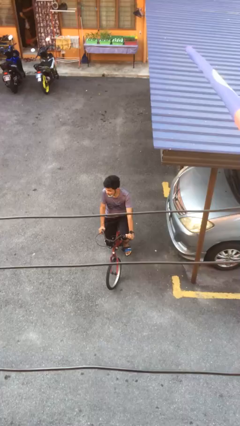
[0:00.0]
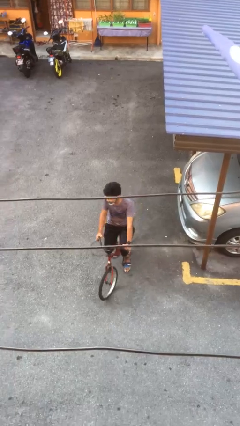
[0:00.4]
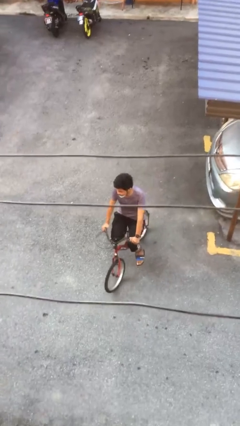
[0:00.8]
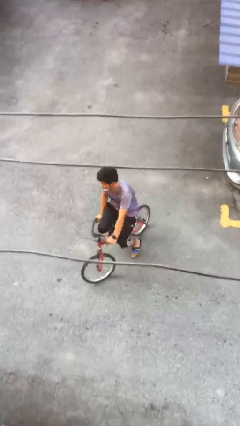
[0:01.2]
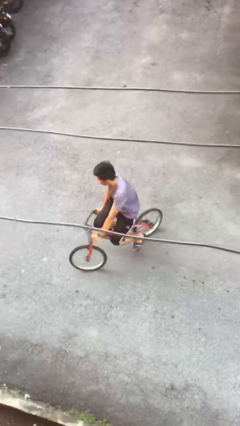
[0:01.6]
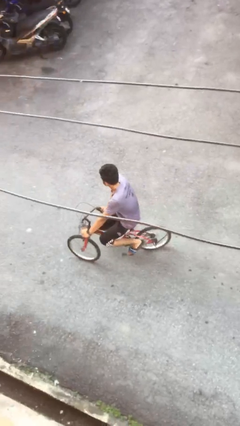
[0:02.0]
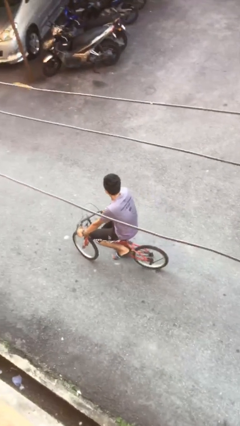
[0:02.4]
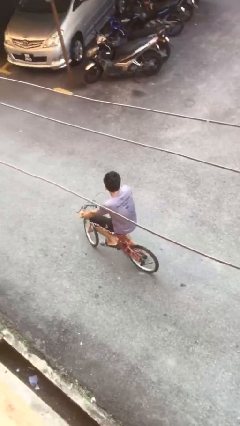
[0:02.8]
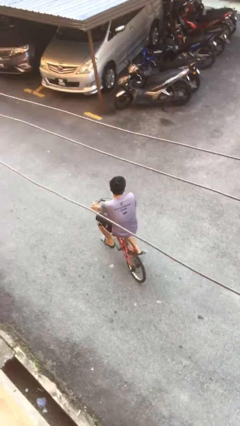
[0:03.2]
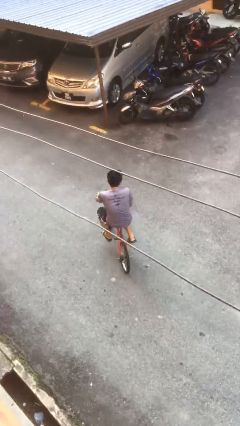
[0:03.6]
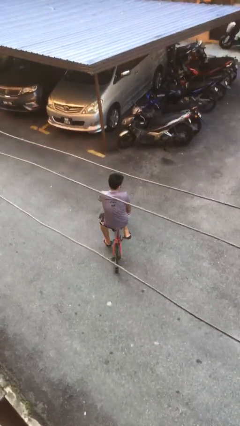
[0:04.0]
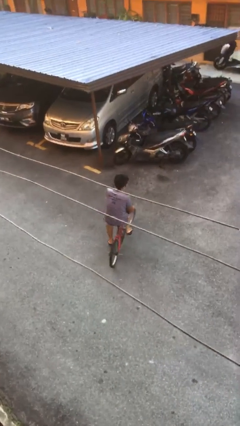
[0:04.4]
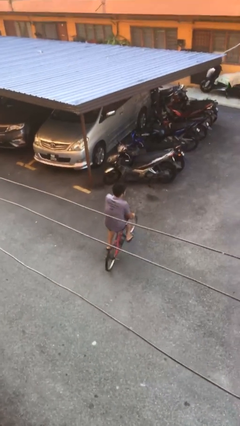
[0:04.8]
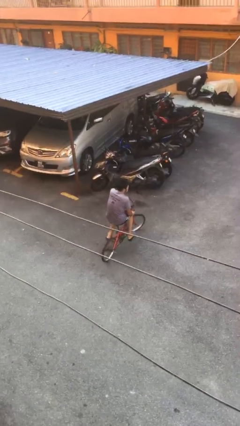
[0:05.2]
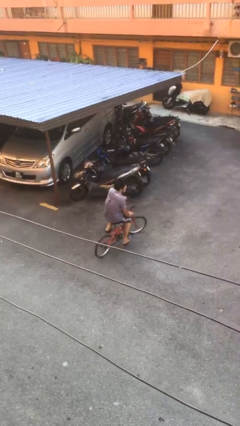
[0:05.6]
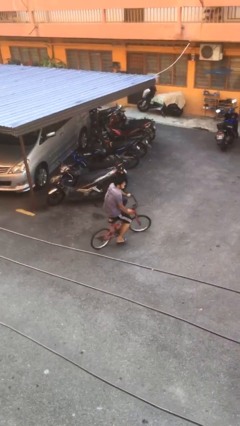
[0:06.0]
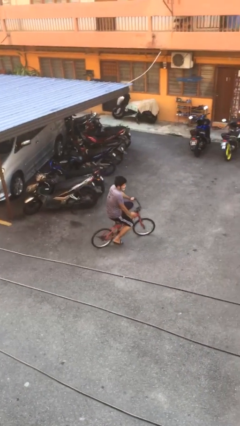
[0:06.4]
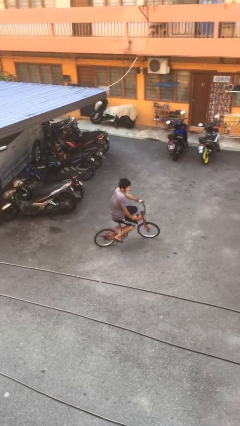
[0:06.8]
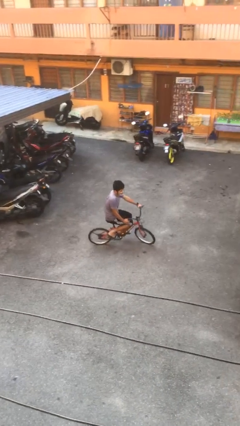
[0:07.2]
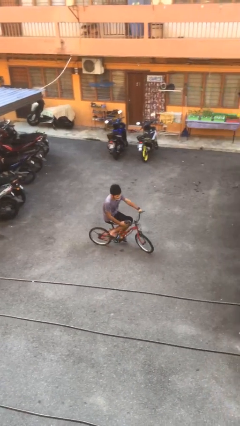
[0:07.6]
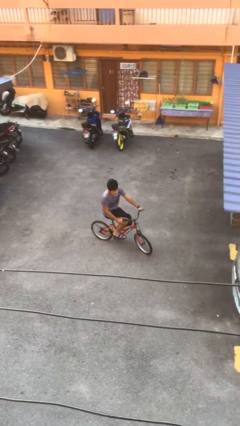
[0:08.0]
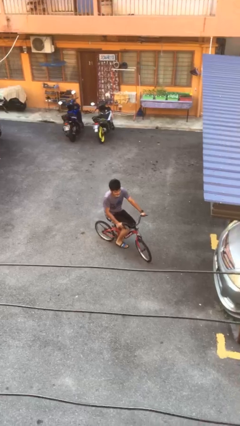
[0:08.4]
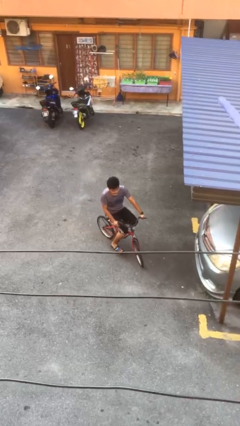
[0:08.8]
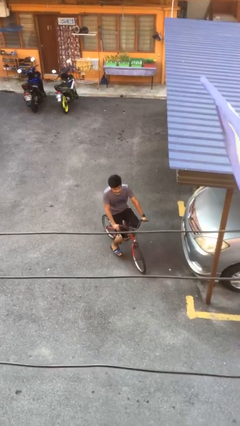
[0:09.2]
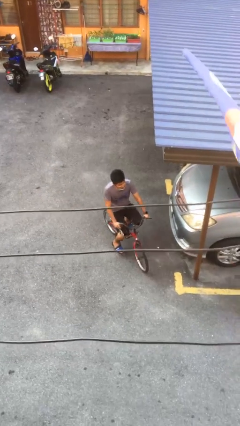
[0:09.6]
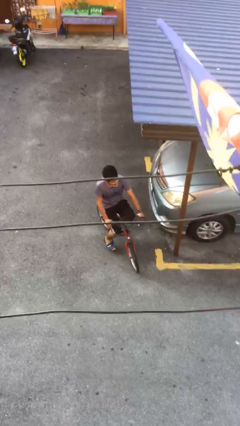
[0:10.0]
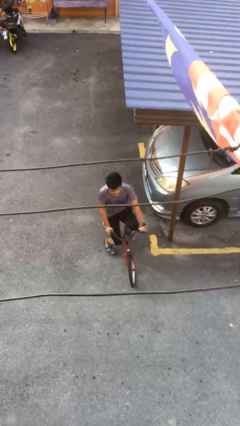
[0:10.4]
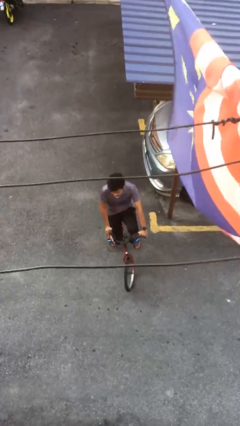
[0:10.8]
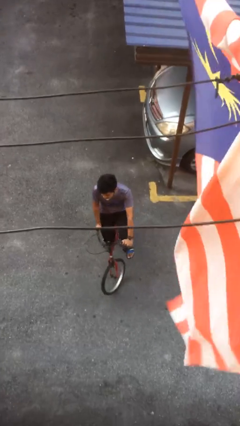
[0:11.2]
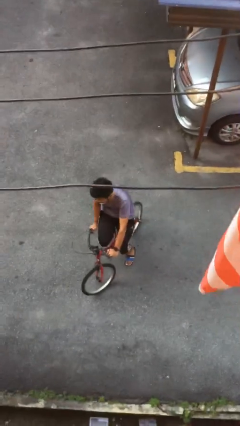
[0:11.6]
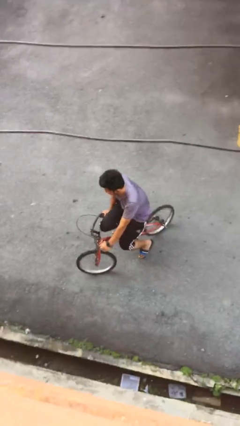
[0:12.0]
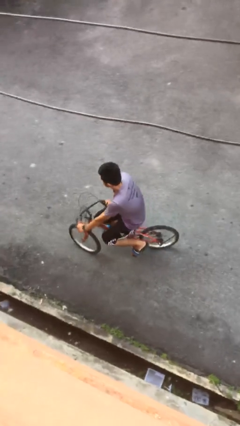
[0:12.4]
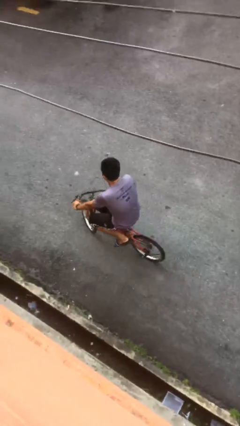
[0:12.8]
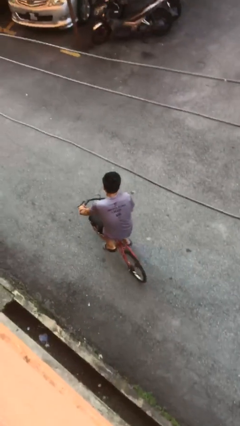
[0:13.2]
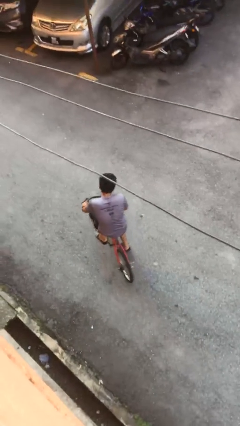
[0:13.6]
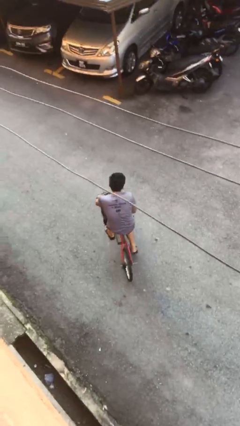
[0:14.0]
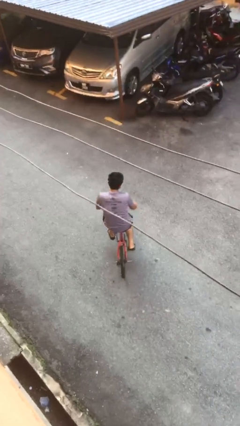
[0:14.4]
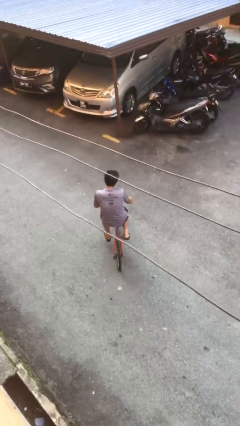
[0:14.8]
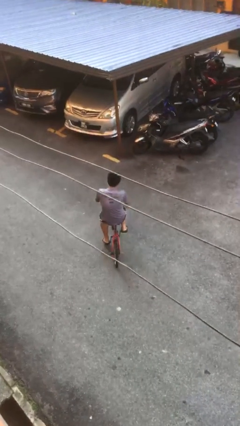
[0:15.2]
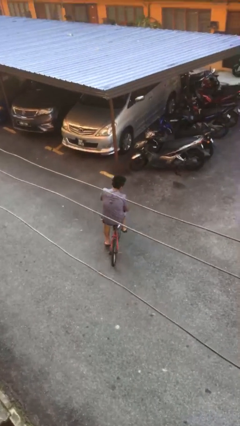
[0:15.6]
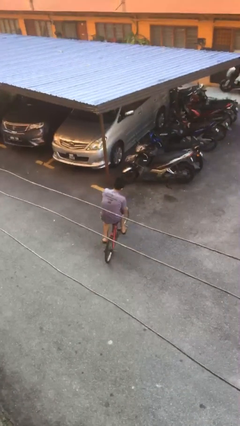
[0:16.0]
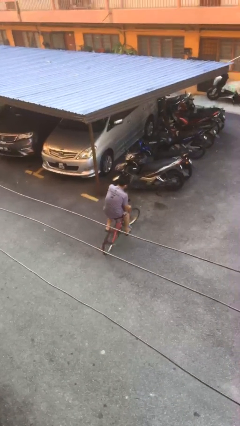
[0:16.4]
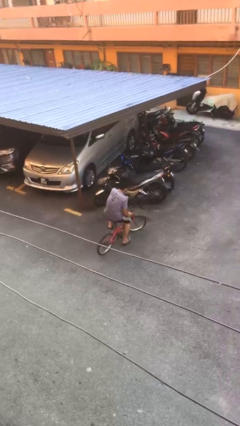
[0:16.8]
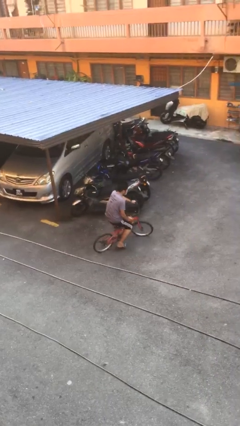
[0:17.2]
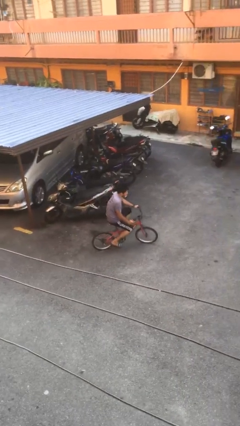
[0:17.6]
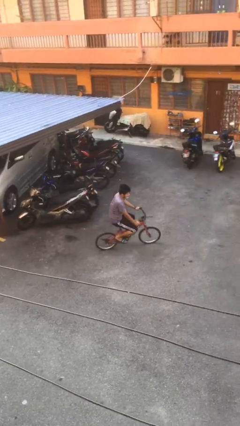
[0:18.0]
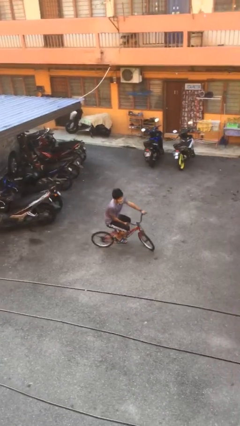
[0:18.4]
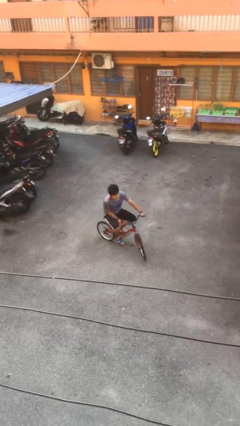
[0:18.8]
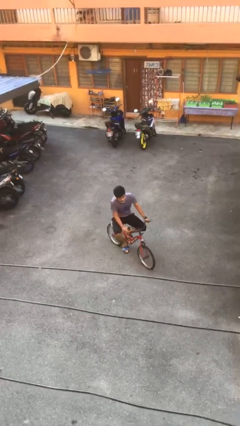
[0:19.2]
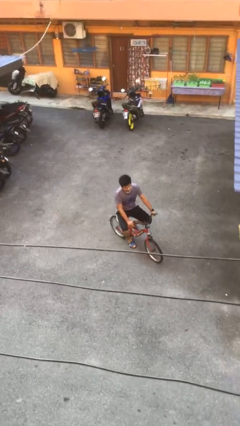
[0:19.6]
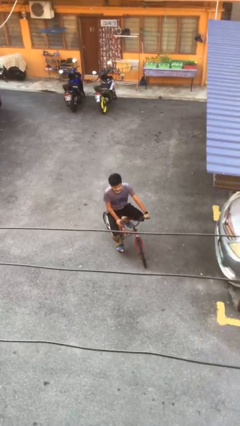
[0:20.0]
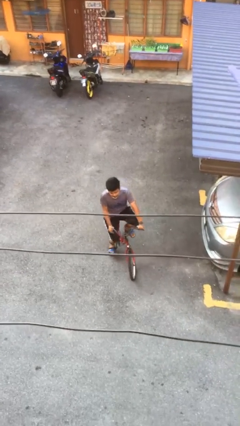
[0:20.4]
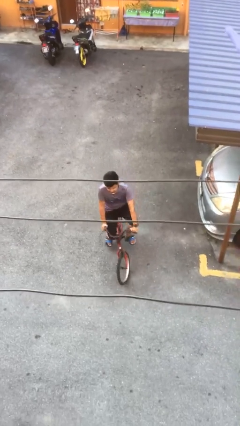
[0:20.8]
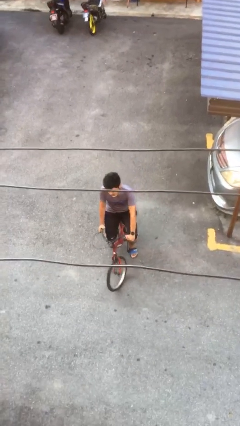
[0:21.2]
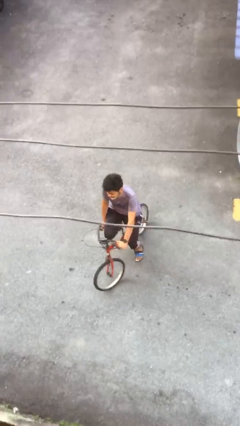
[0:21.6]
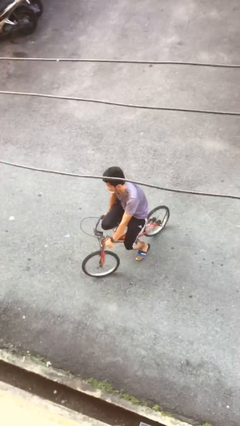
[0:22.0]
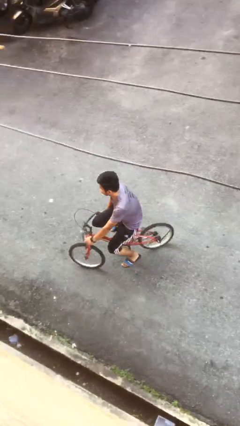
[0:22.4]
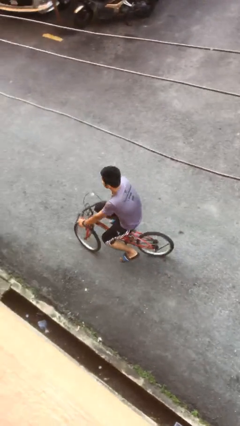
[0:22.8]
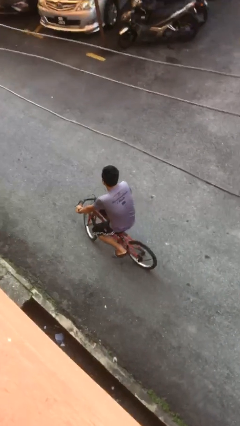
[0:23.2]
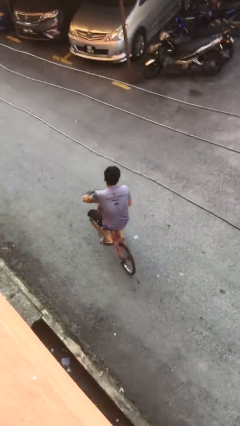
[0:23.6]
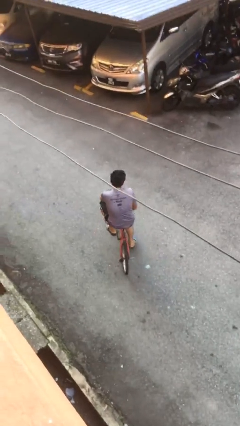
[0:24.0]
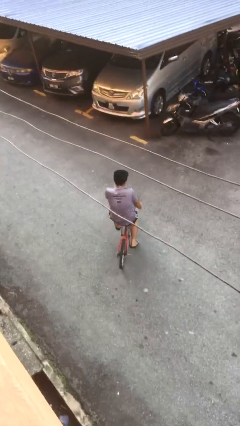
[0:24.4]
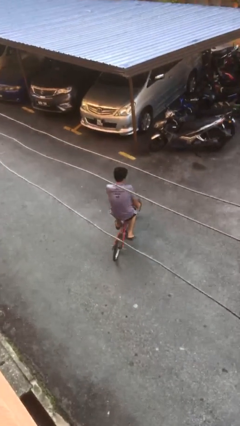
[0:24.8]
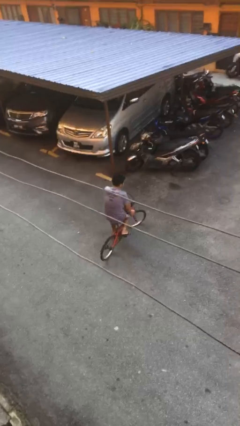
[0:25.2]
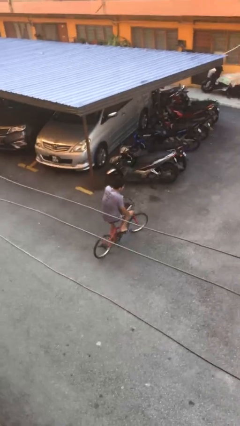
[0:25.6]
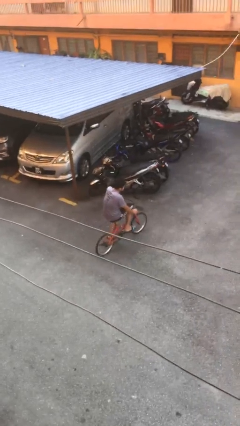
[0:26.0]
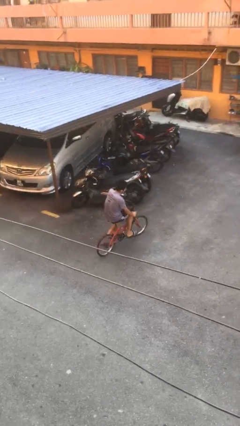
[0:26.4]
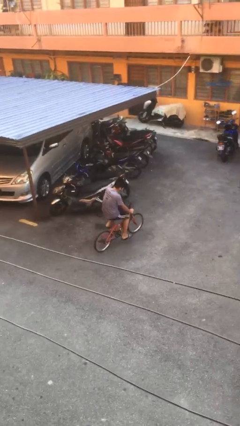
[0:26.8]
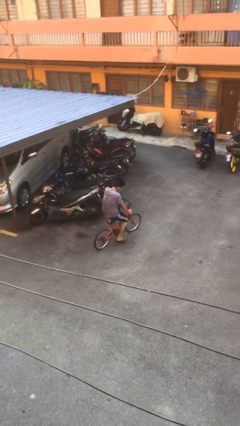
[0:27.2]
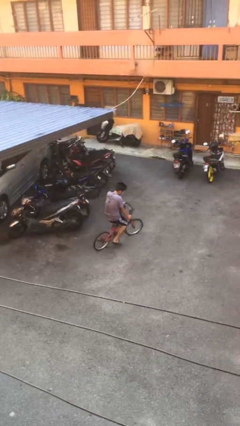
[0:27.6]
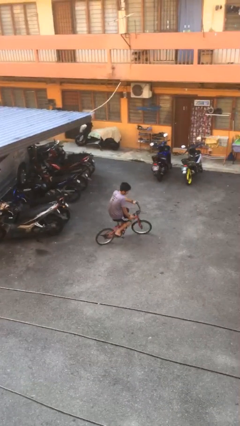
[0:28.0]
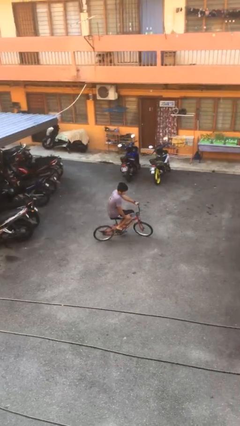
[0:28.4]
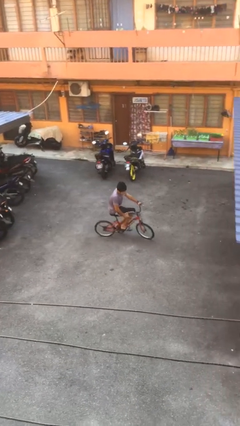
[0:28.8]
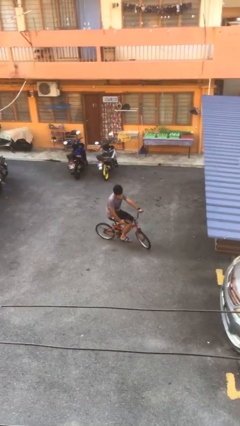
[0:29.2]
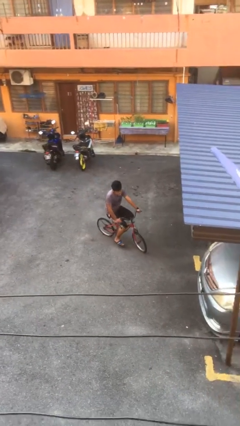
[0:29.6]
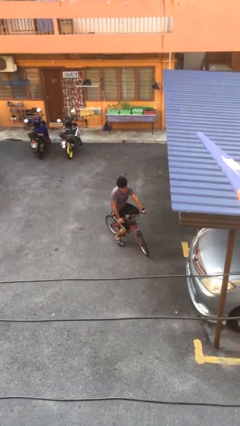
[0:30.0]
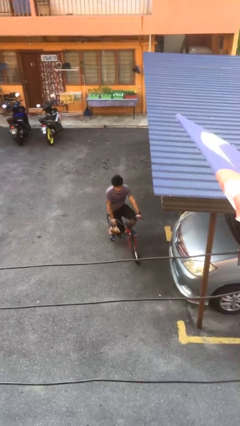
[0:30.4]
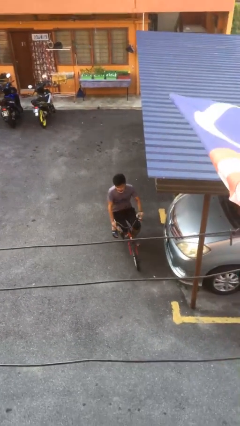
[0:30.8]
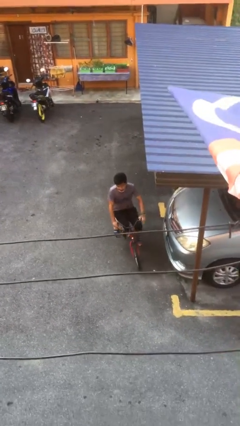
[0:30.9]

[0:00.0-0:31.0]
person rides bicycle

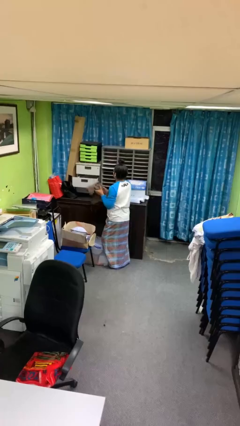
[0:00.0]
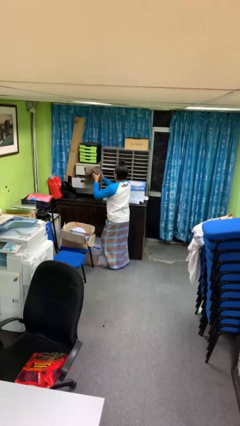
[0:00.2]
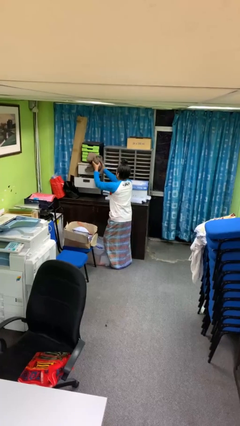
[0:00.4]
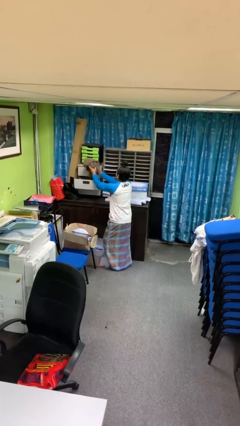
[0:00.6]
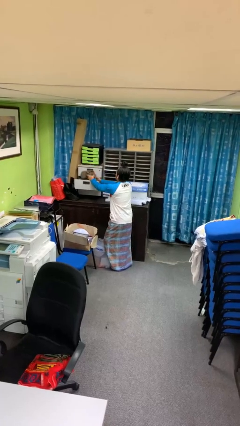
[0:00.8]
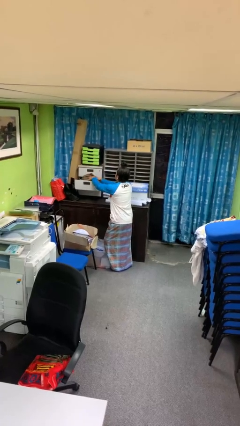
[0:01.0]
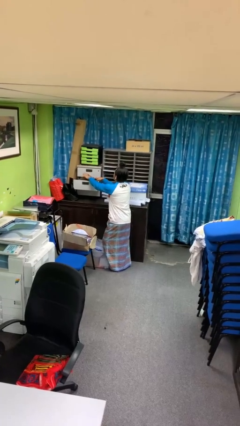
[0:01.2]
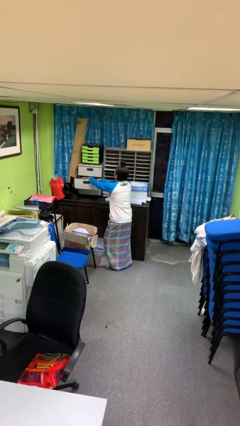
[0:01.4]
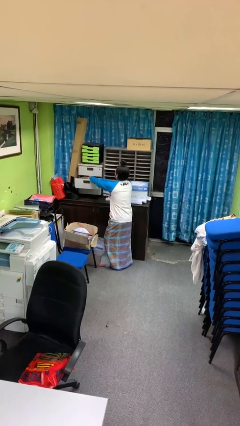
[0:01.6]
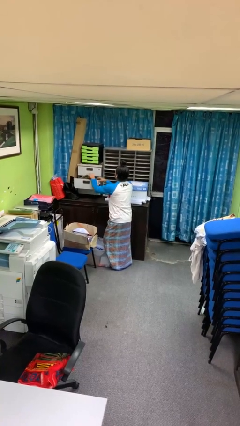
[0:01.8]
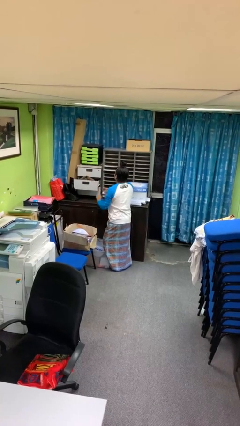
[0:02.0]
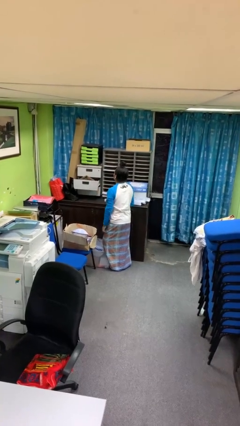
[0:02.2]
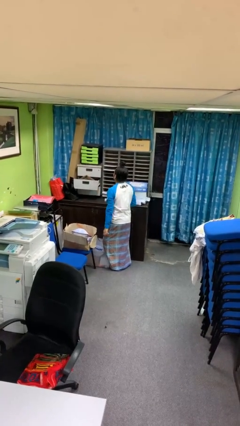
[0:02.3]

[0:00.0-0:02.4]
person puts clothes into dresser

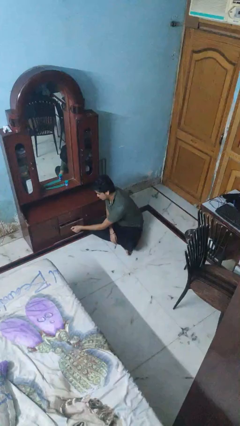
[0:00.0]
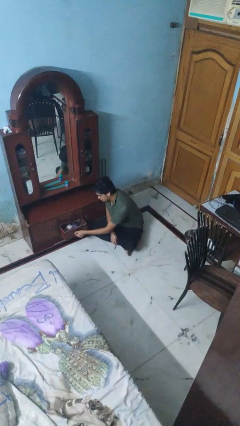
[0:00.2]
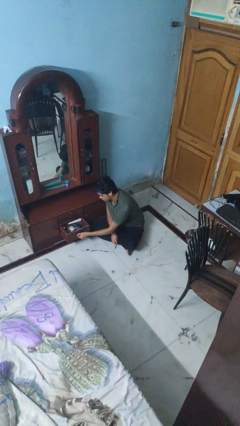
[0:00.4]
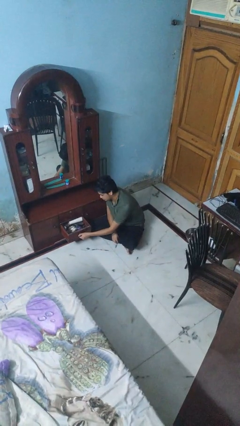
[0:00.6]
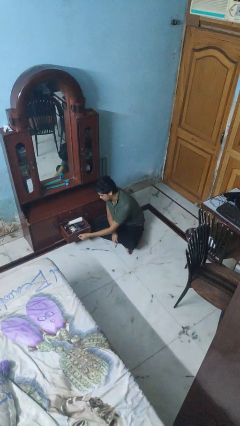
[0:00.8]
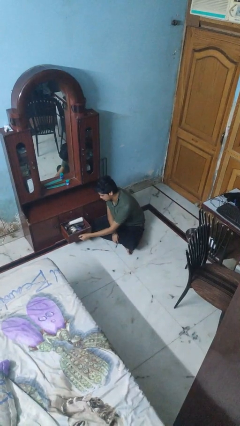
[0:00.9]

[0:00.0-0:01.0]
person opens dresser drawer
